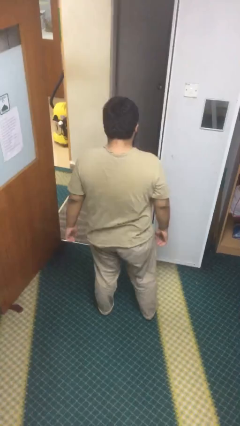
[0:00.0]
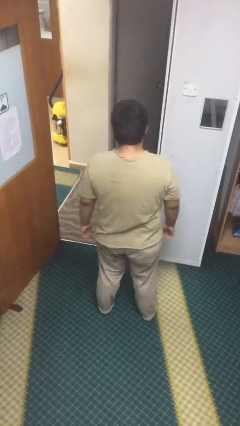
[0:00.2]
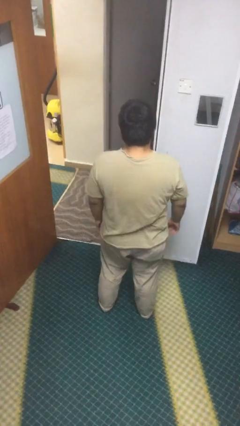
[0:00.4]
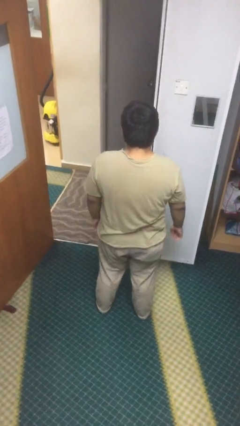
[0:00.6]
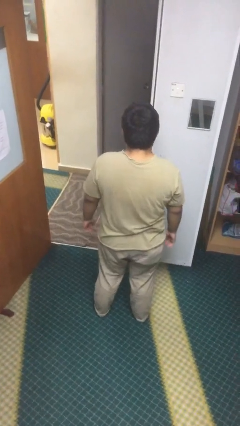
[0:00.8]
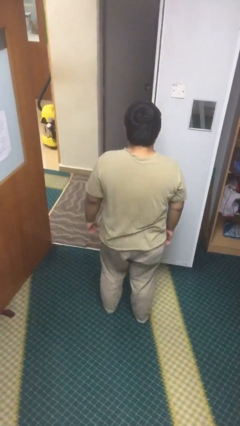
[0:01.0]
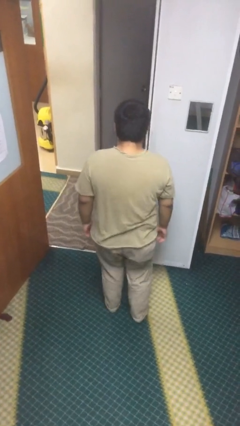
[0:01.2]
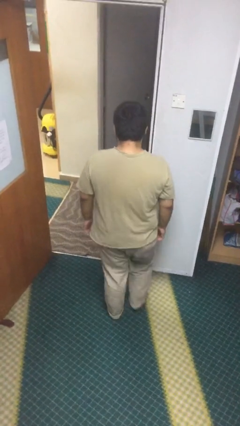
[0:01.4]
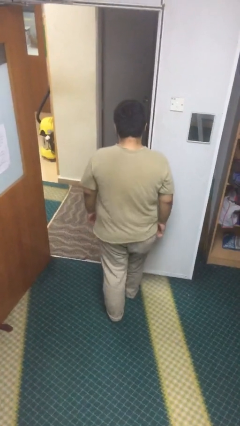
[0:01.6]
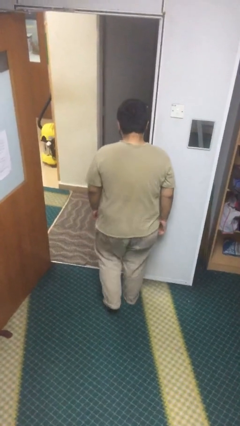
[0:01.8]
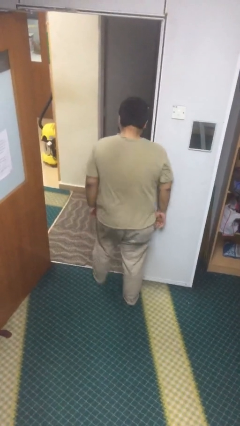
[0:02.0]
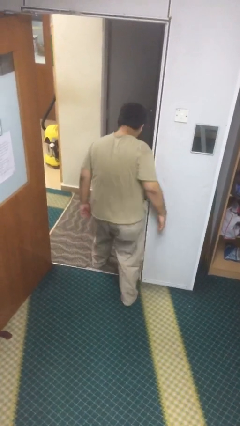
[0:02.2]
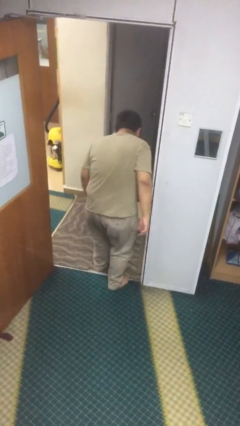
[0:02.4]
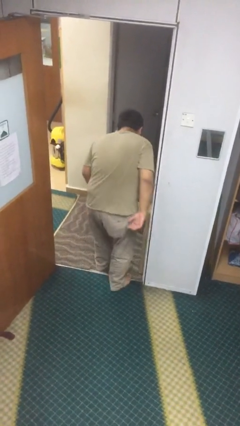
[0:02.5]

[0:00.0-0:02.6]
person bumps into wall

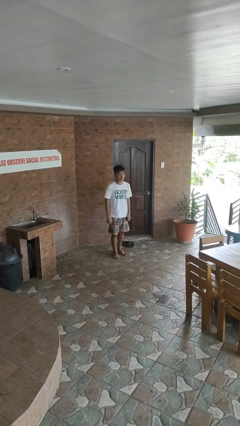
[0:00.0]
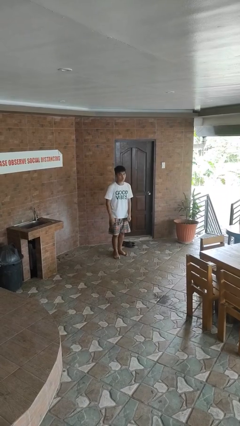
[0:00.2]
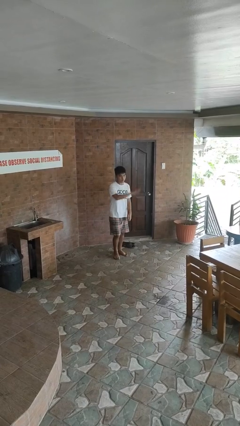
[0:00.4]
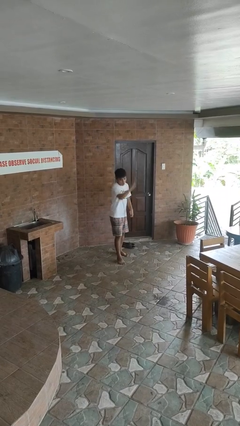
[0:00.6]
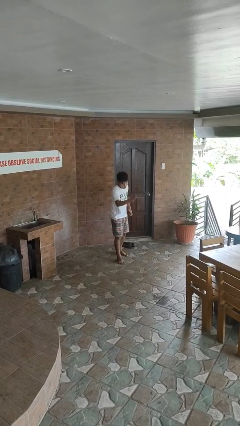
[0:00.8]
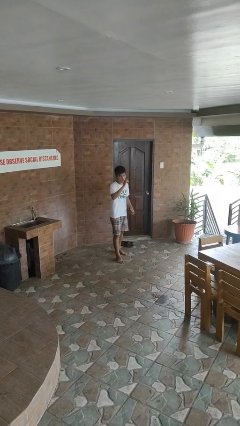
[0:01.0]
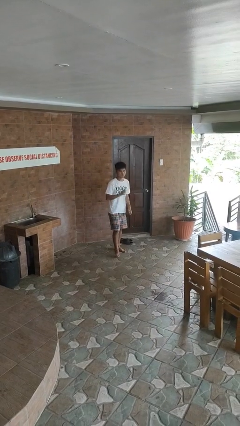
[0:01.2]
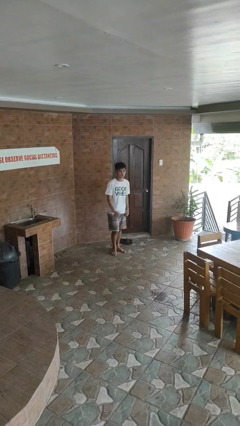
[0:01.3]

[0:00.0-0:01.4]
person karate chop

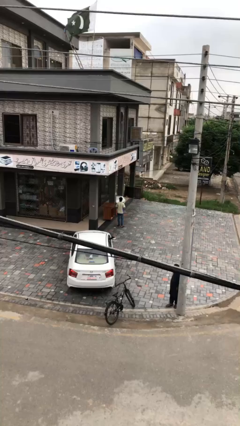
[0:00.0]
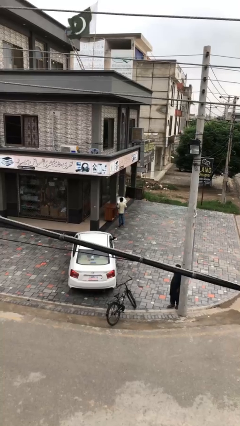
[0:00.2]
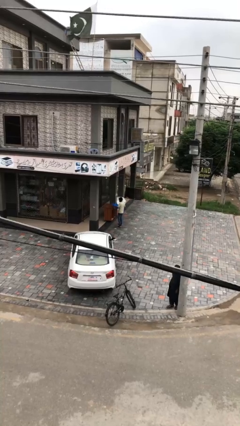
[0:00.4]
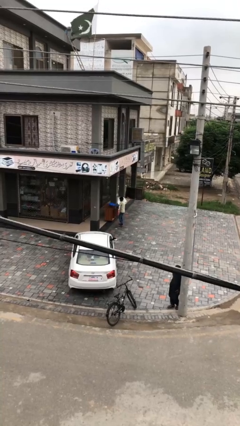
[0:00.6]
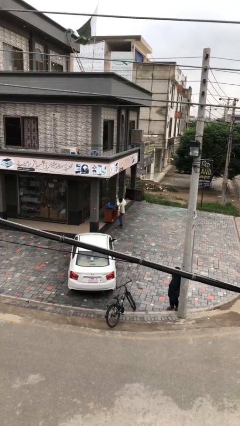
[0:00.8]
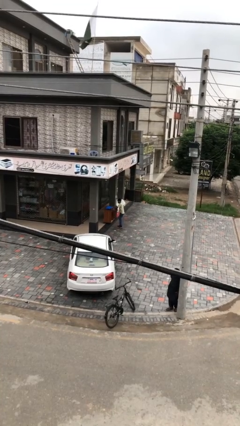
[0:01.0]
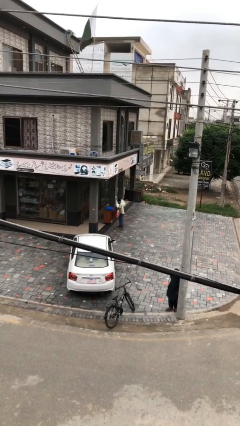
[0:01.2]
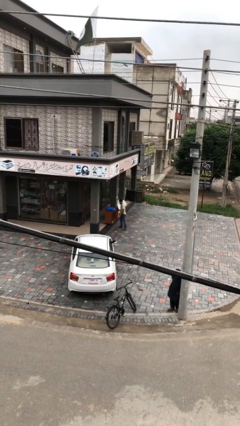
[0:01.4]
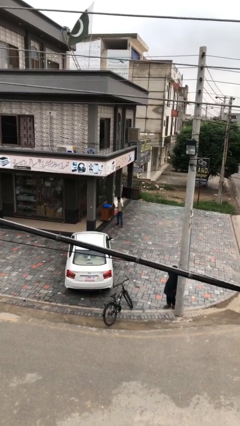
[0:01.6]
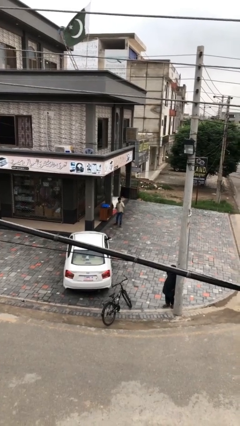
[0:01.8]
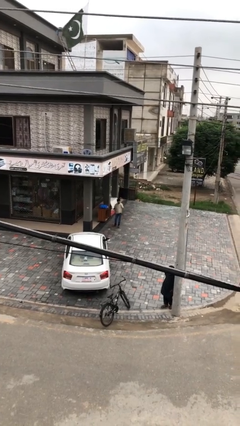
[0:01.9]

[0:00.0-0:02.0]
person puts down object on table

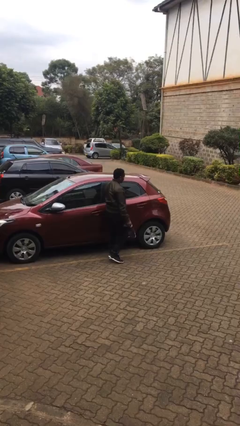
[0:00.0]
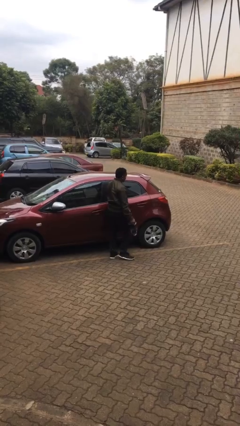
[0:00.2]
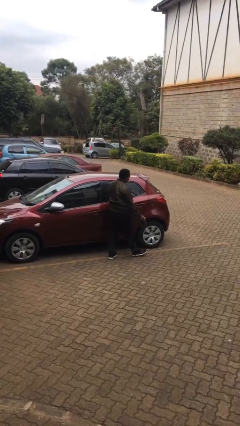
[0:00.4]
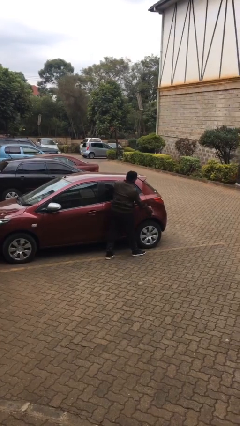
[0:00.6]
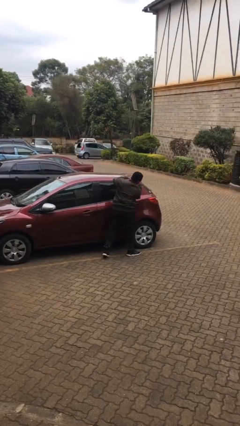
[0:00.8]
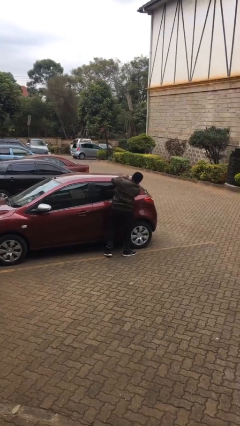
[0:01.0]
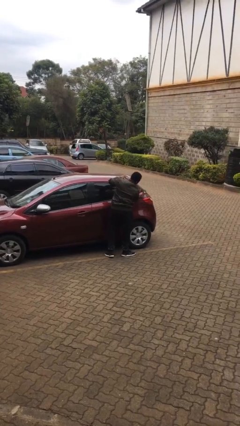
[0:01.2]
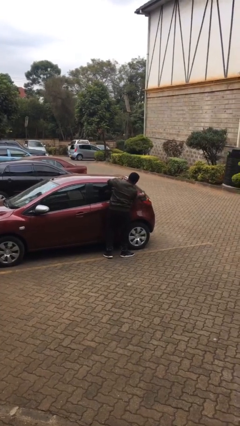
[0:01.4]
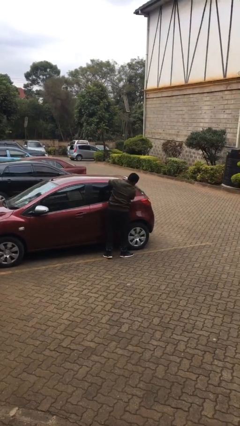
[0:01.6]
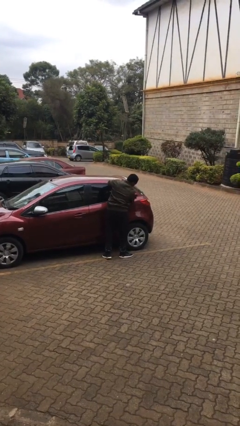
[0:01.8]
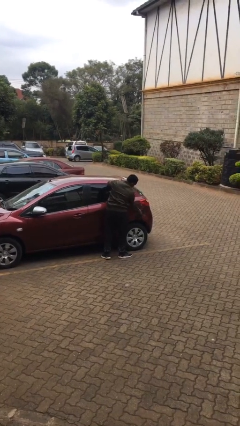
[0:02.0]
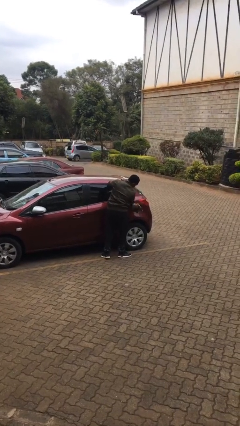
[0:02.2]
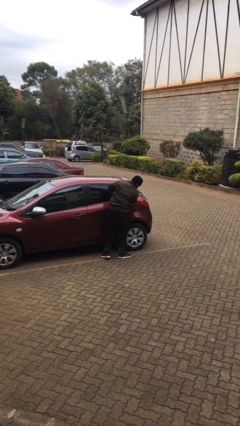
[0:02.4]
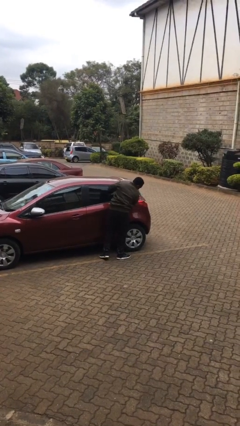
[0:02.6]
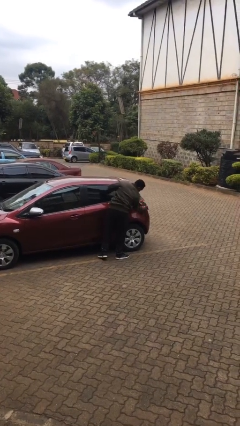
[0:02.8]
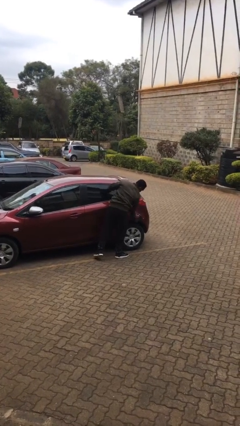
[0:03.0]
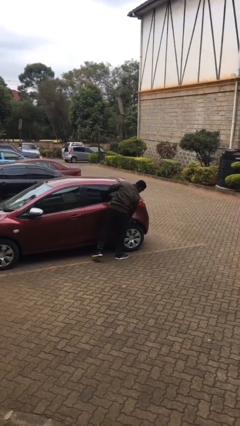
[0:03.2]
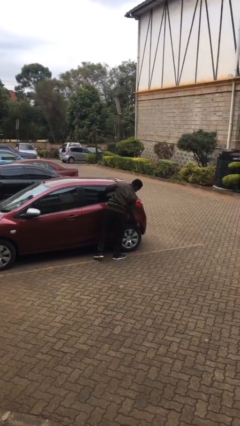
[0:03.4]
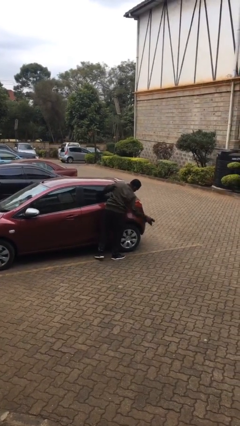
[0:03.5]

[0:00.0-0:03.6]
person polishes car with rag

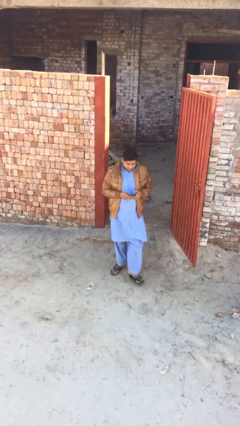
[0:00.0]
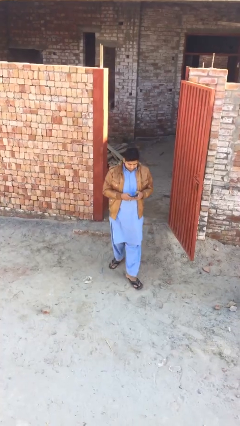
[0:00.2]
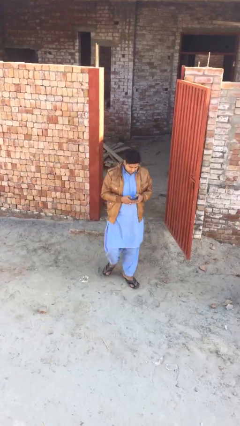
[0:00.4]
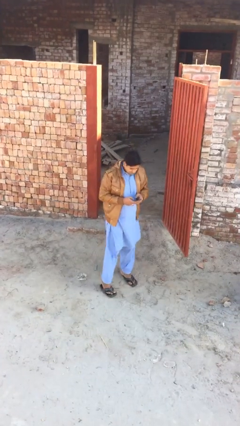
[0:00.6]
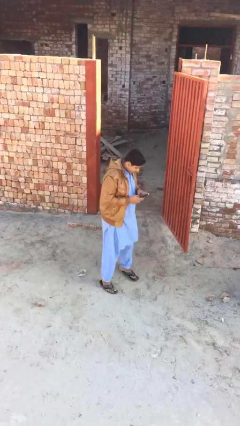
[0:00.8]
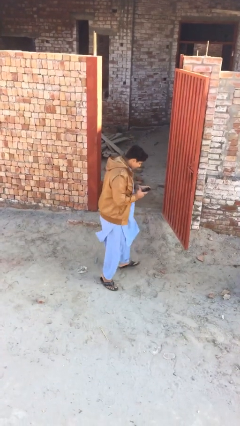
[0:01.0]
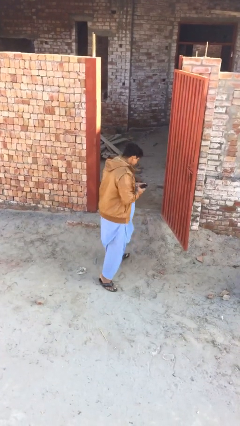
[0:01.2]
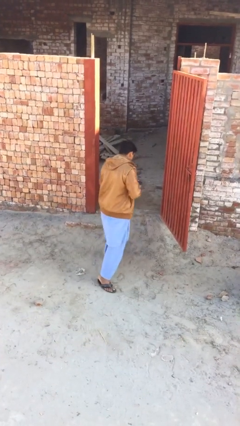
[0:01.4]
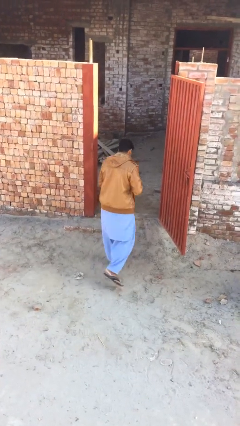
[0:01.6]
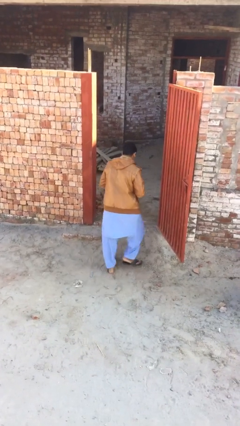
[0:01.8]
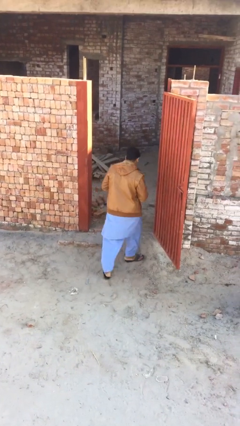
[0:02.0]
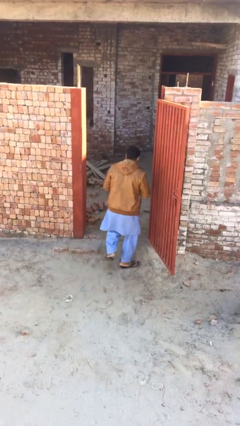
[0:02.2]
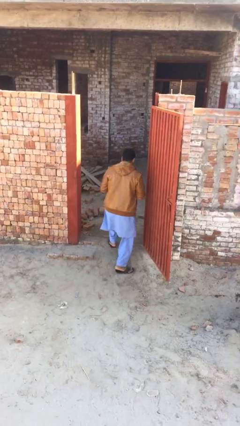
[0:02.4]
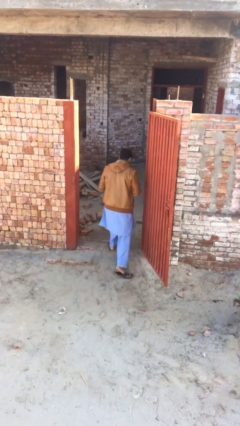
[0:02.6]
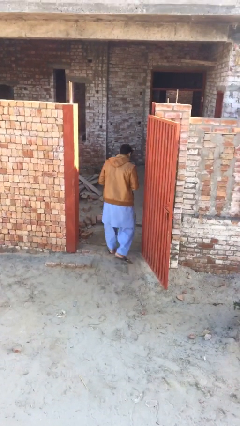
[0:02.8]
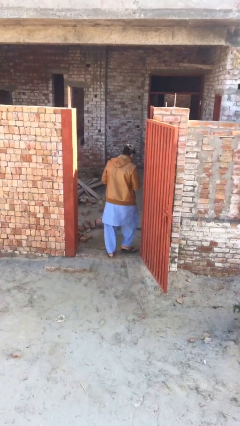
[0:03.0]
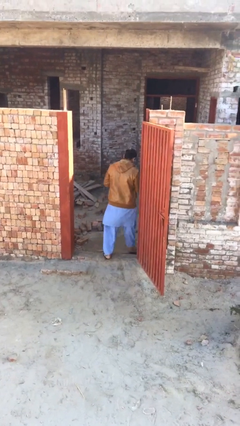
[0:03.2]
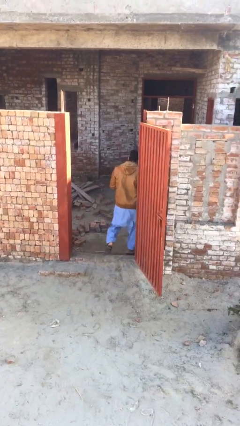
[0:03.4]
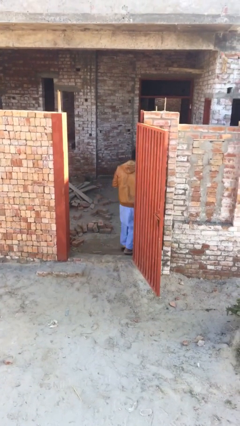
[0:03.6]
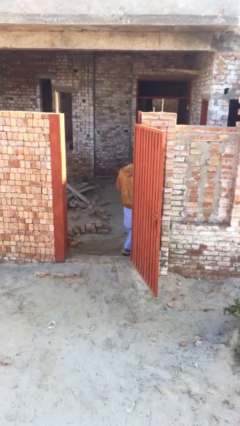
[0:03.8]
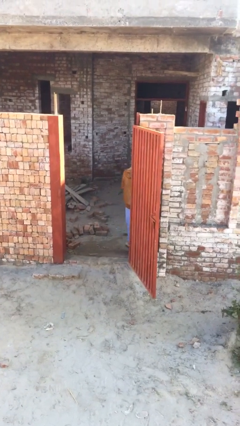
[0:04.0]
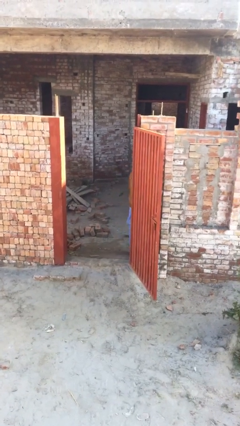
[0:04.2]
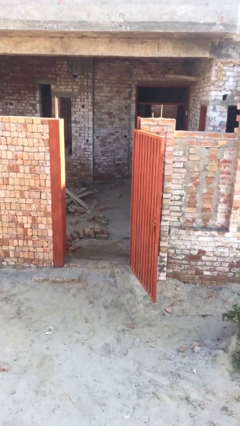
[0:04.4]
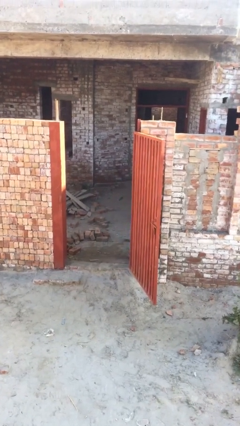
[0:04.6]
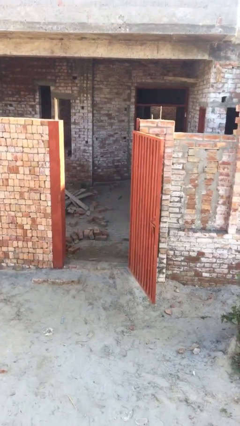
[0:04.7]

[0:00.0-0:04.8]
person exits scene through structure

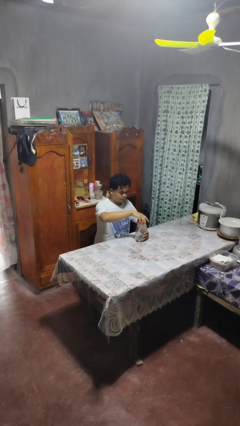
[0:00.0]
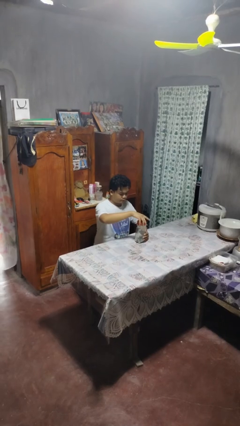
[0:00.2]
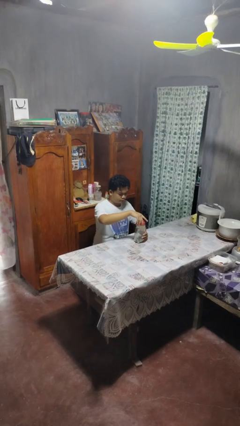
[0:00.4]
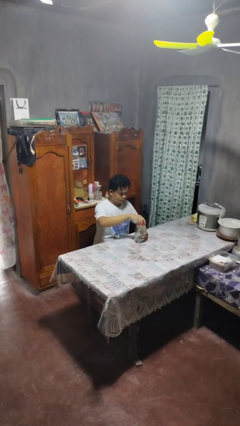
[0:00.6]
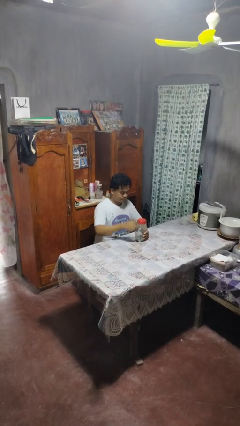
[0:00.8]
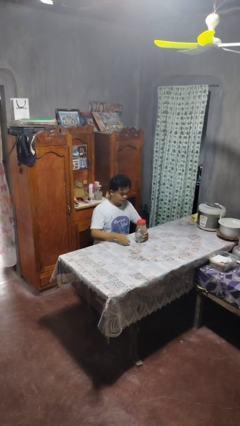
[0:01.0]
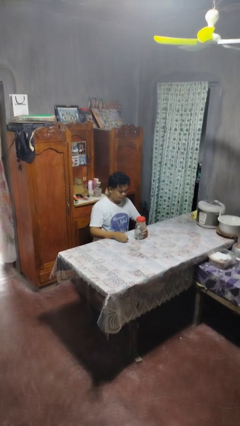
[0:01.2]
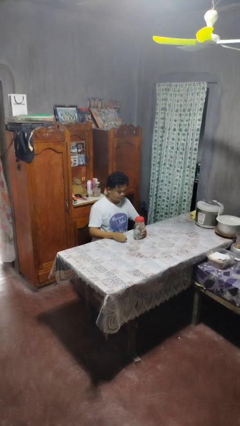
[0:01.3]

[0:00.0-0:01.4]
person closes jar

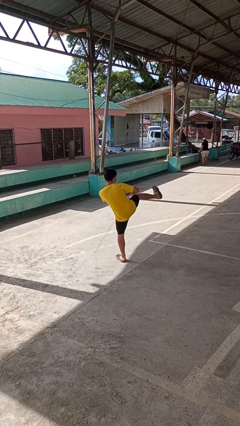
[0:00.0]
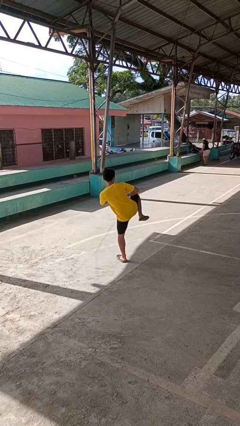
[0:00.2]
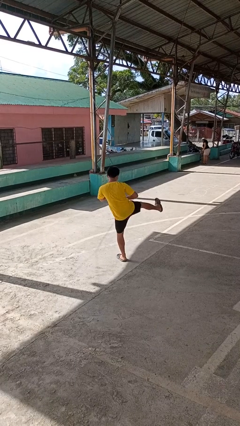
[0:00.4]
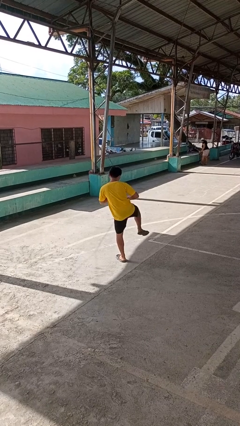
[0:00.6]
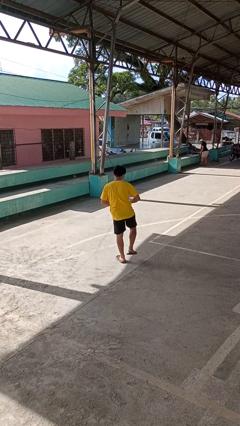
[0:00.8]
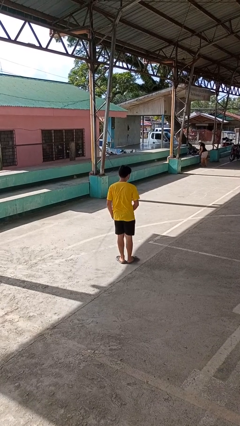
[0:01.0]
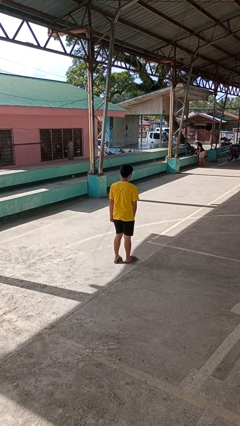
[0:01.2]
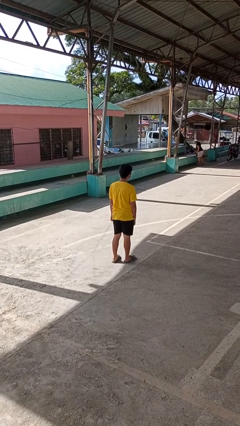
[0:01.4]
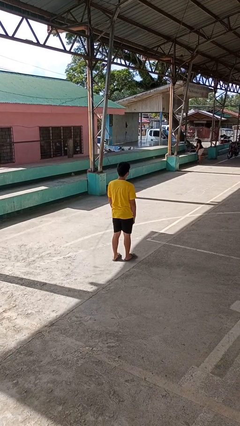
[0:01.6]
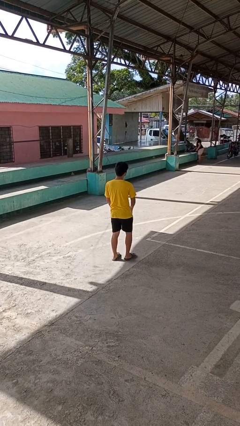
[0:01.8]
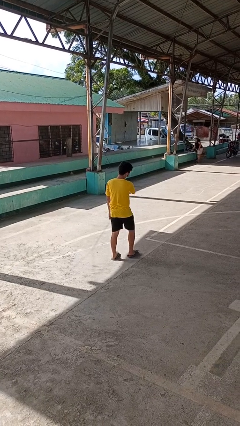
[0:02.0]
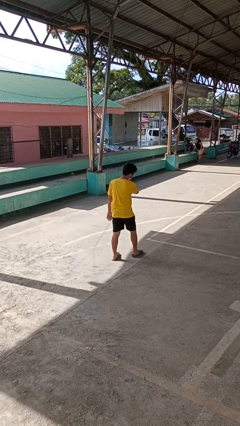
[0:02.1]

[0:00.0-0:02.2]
person karate kicks
